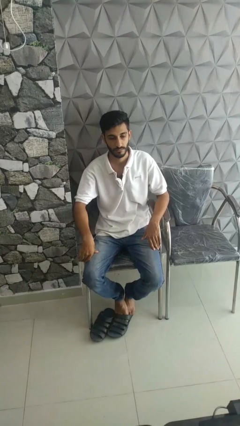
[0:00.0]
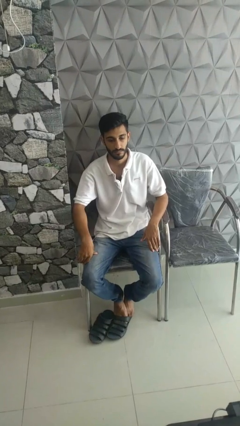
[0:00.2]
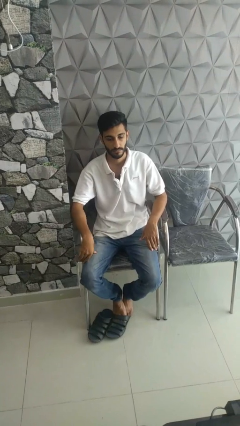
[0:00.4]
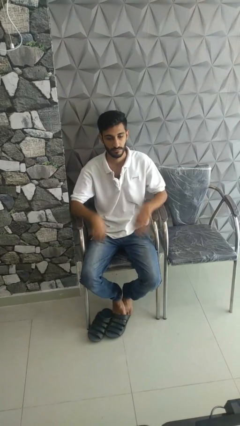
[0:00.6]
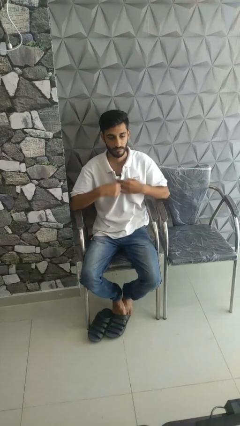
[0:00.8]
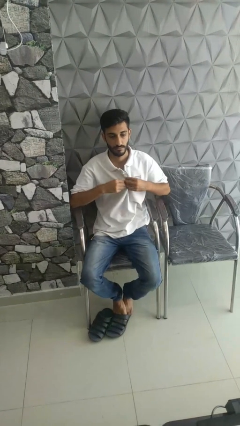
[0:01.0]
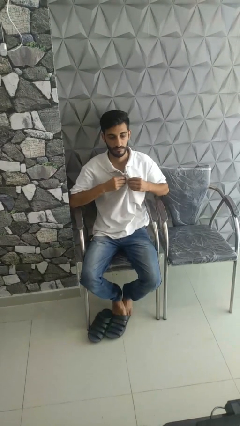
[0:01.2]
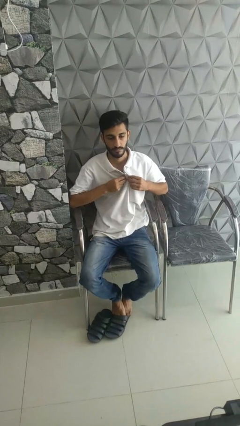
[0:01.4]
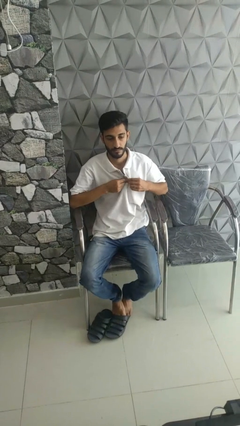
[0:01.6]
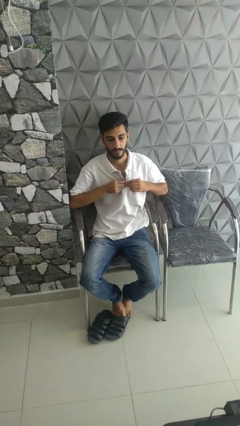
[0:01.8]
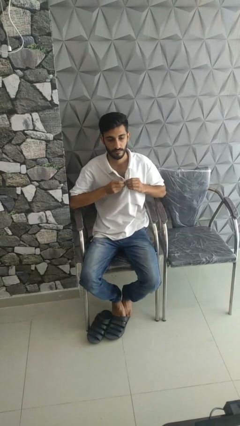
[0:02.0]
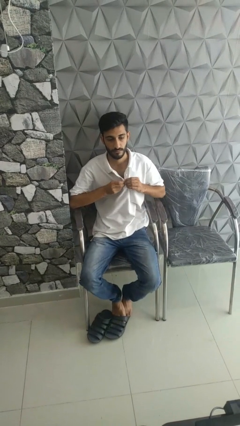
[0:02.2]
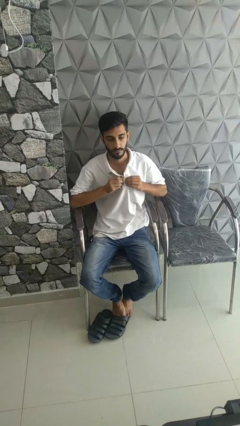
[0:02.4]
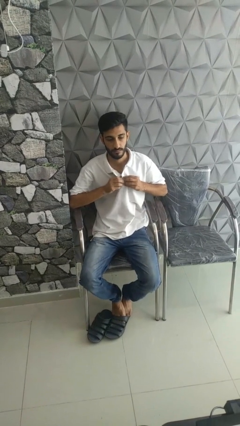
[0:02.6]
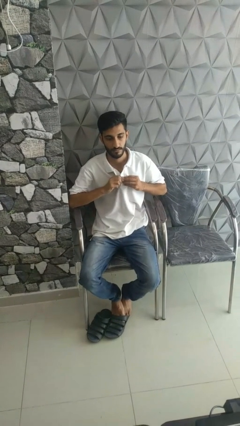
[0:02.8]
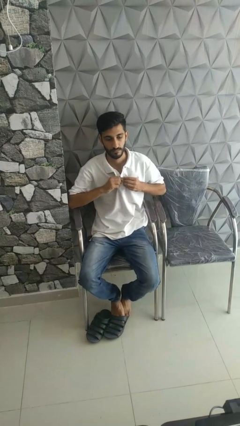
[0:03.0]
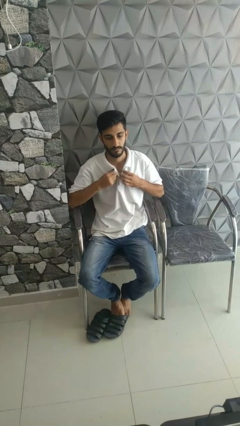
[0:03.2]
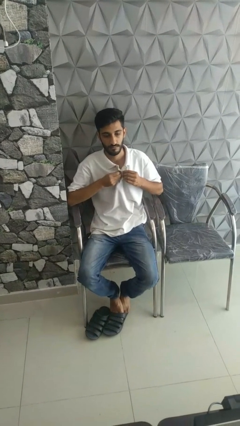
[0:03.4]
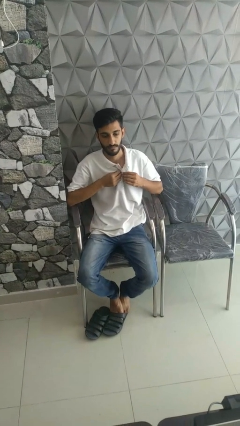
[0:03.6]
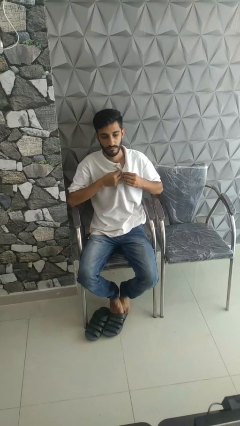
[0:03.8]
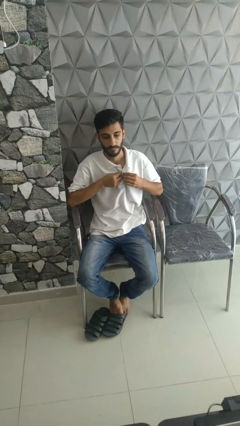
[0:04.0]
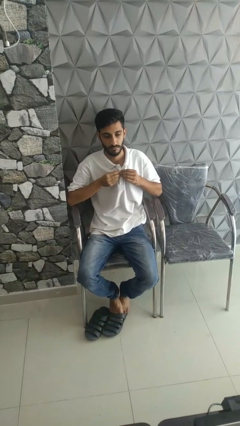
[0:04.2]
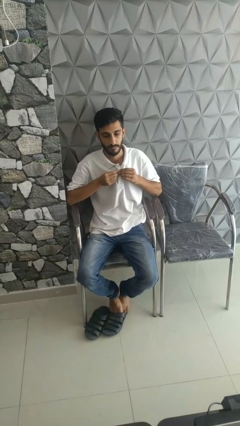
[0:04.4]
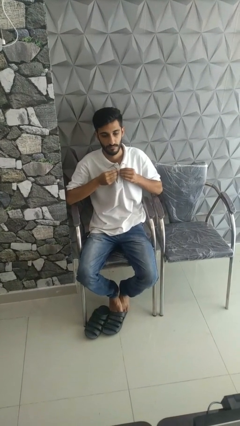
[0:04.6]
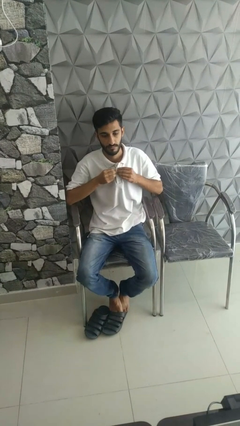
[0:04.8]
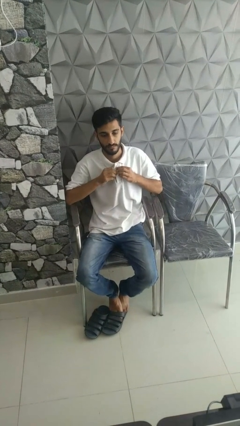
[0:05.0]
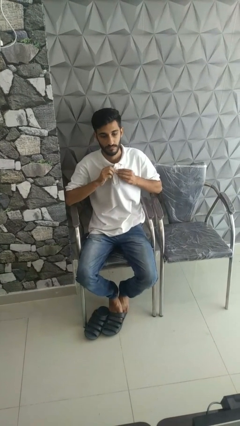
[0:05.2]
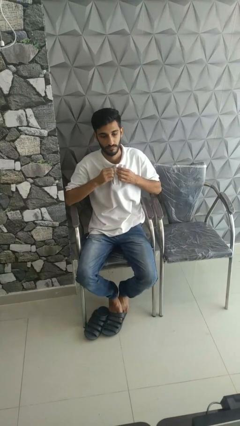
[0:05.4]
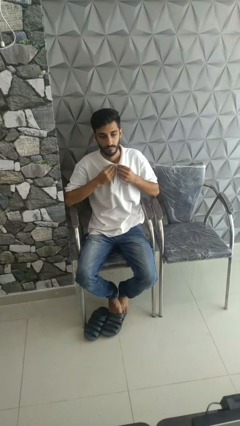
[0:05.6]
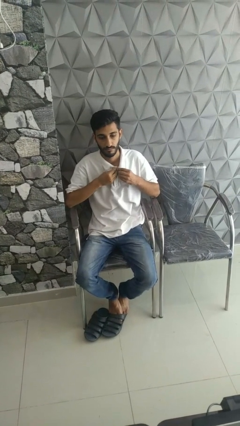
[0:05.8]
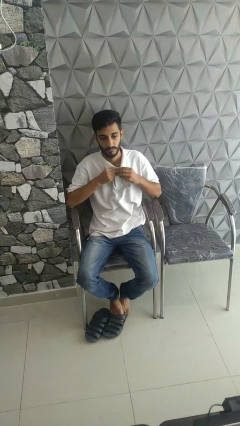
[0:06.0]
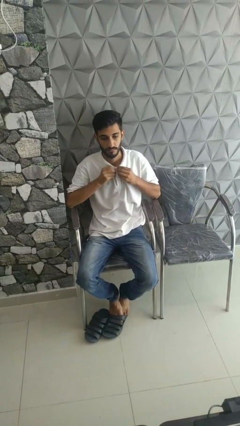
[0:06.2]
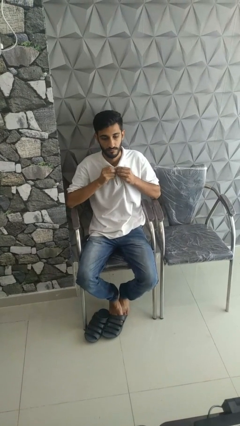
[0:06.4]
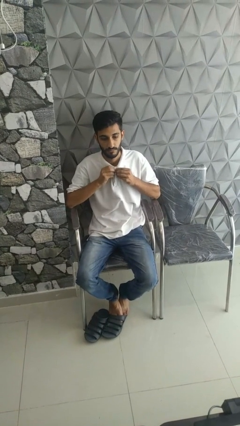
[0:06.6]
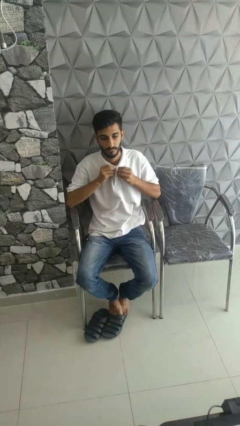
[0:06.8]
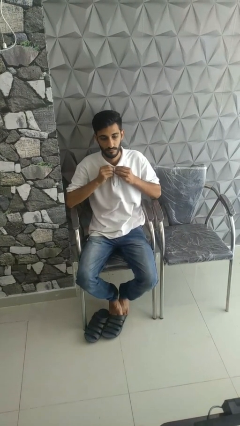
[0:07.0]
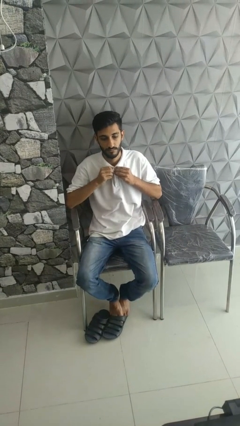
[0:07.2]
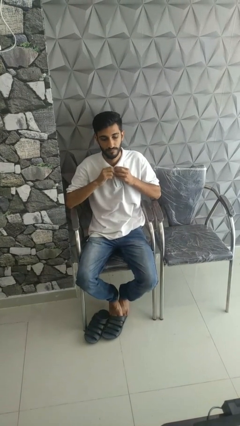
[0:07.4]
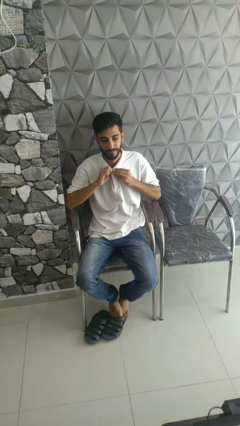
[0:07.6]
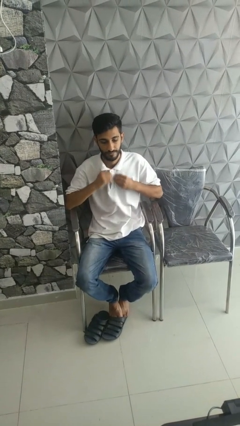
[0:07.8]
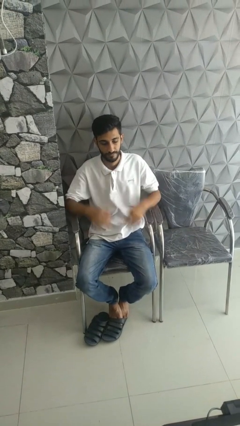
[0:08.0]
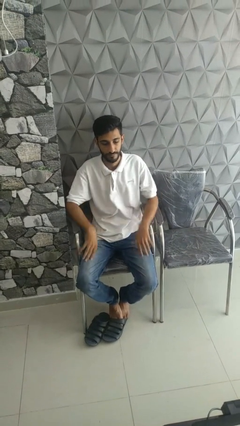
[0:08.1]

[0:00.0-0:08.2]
person buttons shirt

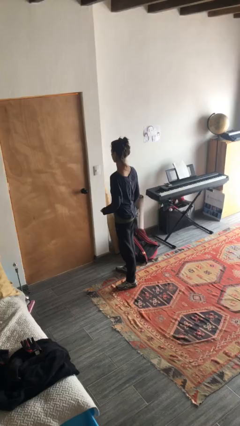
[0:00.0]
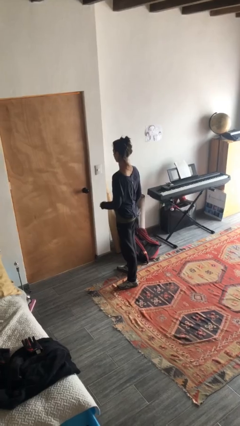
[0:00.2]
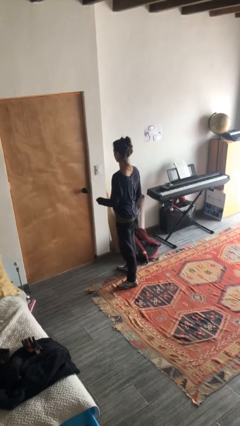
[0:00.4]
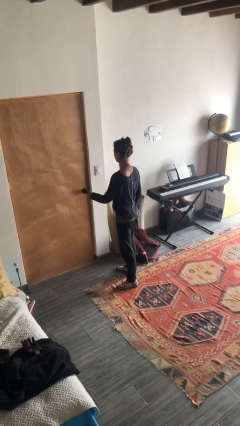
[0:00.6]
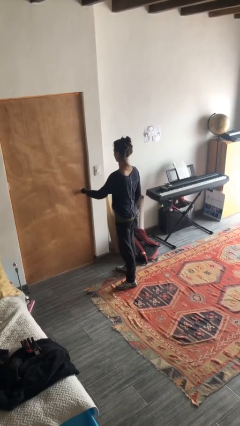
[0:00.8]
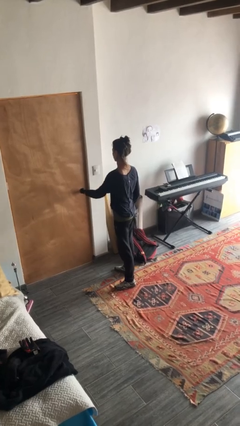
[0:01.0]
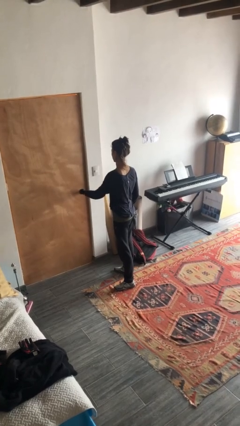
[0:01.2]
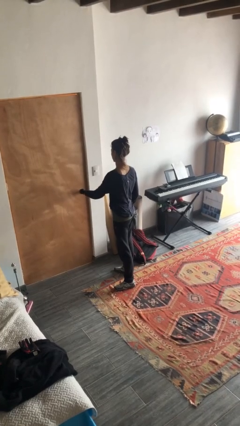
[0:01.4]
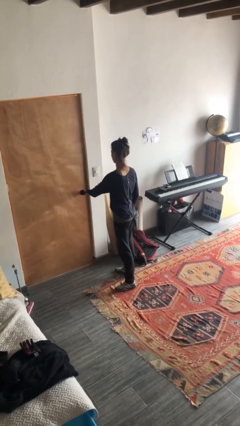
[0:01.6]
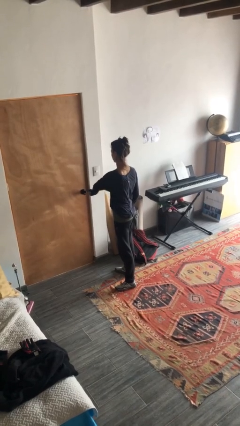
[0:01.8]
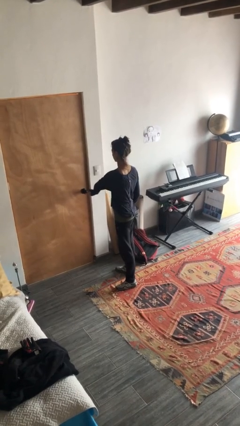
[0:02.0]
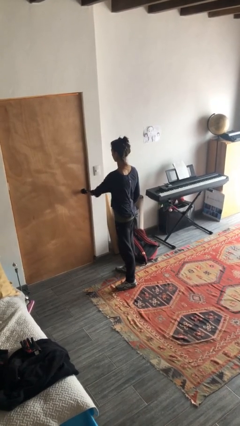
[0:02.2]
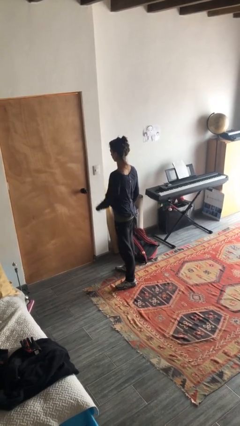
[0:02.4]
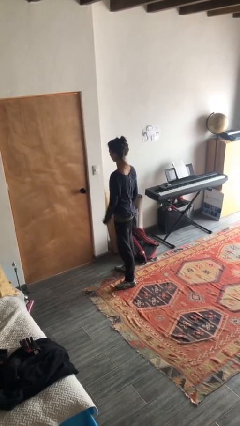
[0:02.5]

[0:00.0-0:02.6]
person locks door with keys

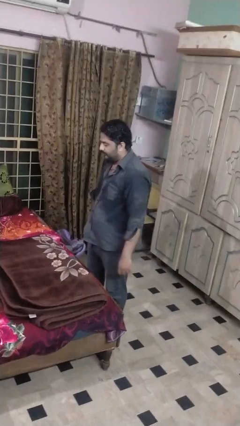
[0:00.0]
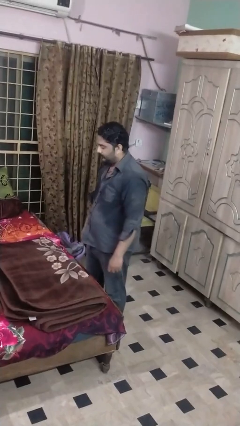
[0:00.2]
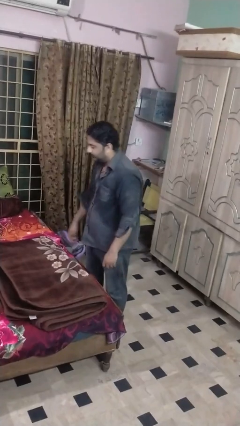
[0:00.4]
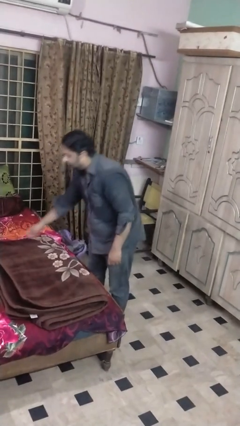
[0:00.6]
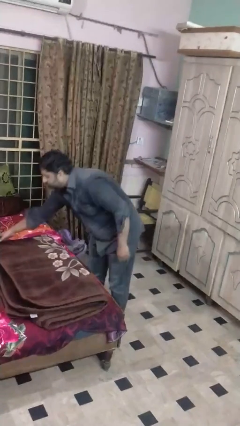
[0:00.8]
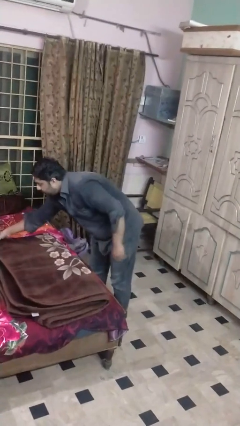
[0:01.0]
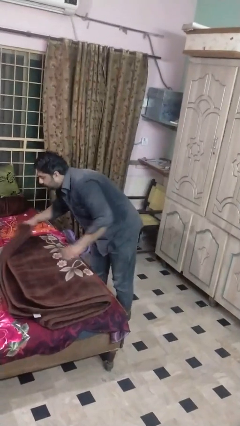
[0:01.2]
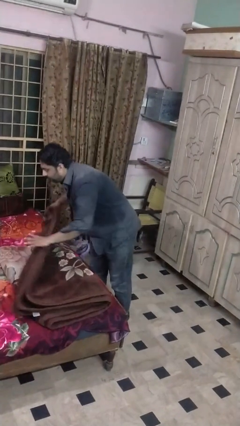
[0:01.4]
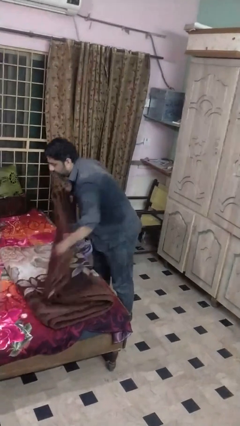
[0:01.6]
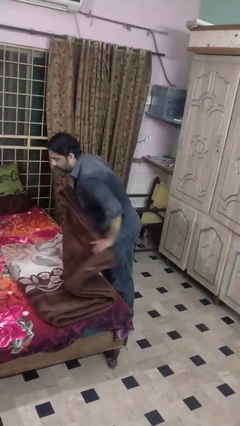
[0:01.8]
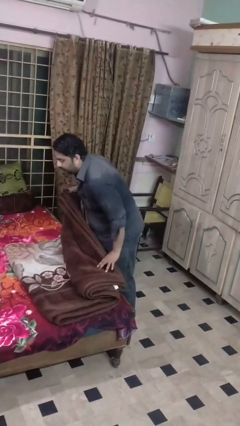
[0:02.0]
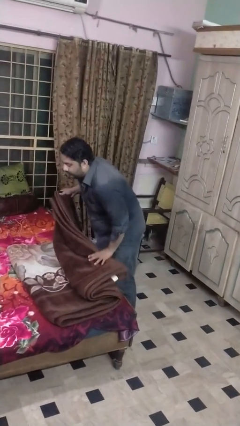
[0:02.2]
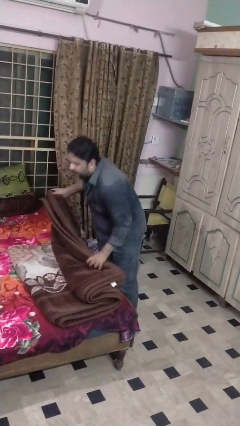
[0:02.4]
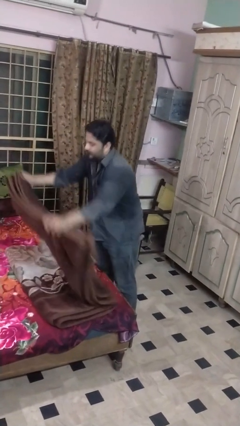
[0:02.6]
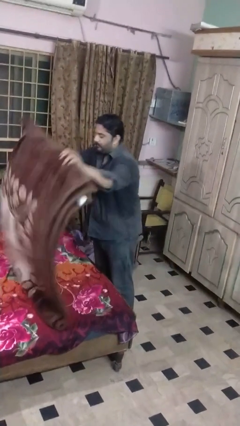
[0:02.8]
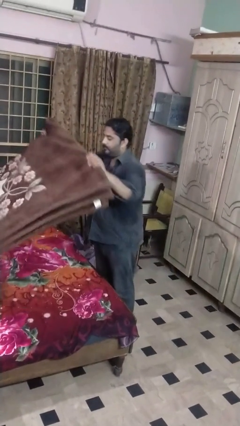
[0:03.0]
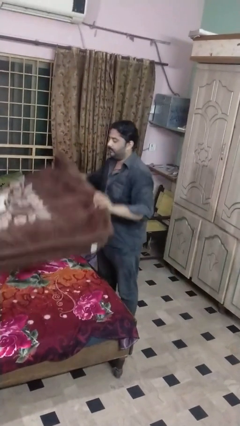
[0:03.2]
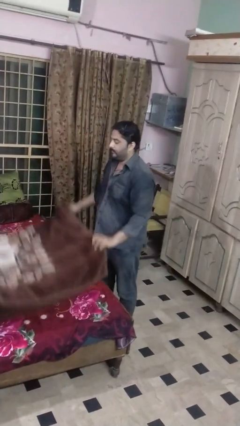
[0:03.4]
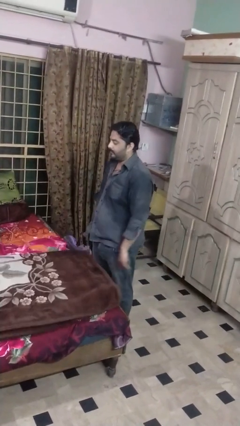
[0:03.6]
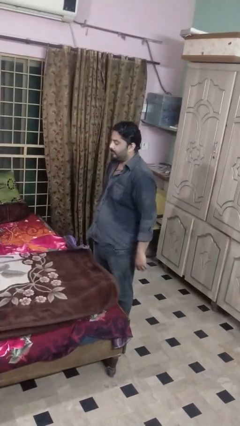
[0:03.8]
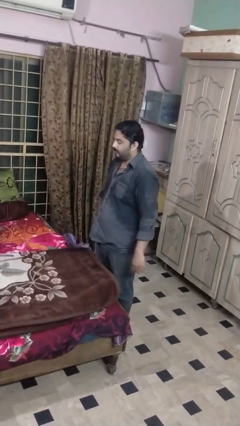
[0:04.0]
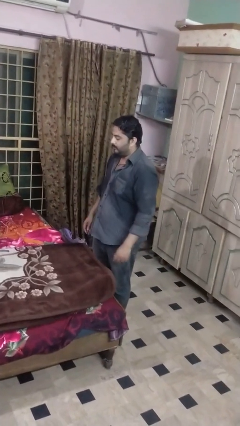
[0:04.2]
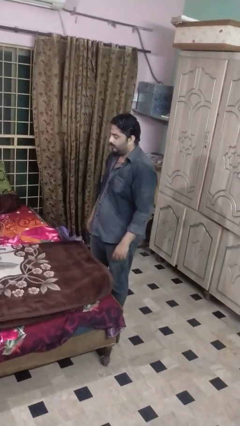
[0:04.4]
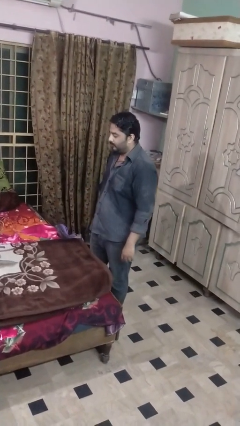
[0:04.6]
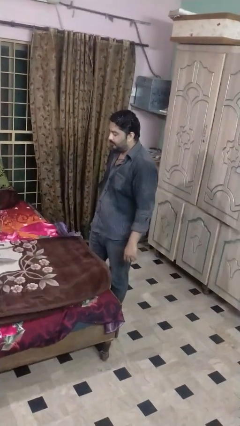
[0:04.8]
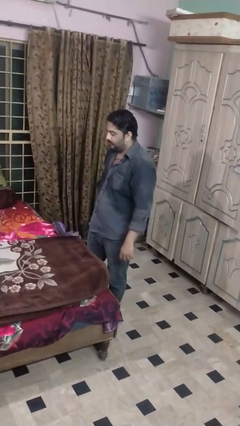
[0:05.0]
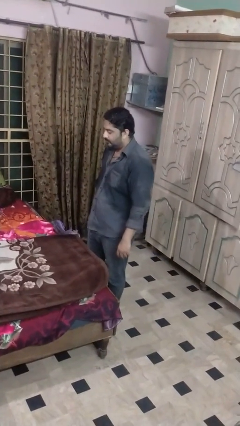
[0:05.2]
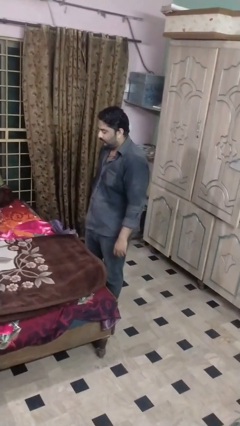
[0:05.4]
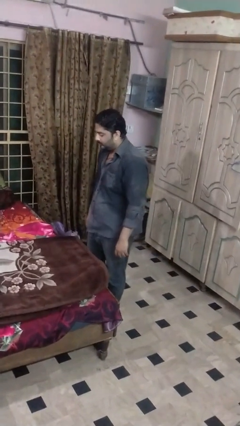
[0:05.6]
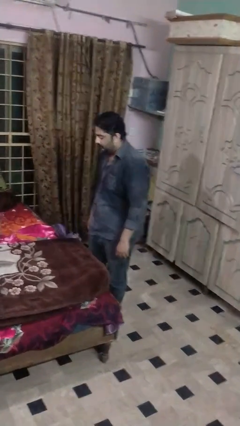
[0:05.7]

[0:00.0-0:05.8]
person unfolds blanket

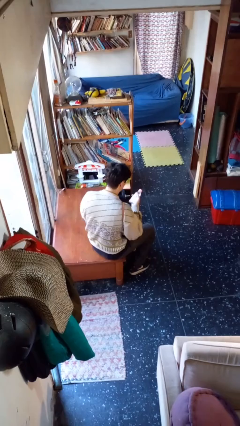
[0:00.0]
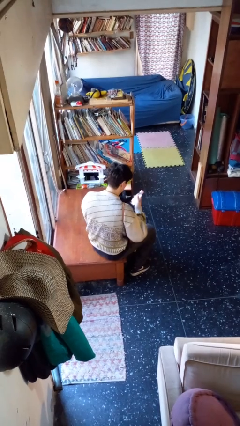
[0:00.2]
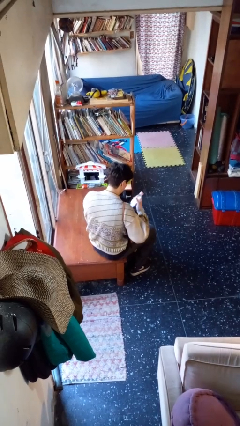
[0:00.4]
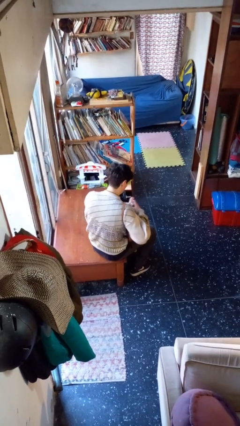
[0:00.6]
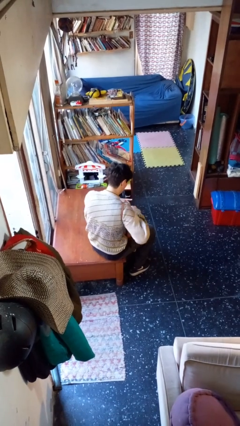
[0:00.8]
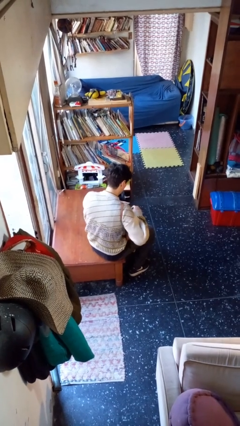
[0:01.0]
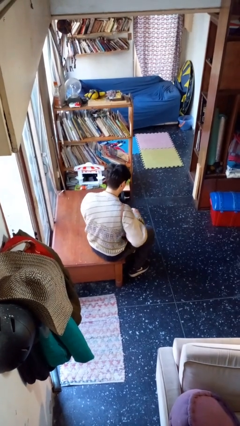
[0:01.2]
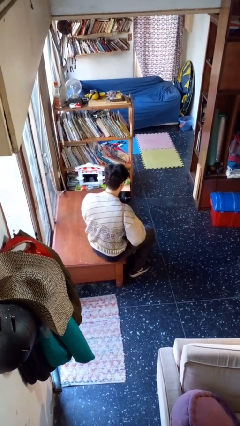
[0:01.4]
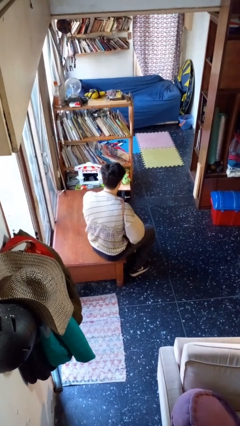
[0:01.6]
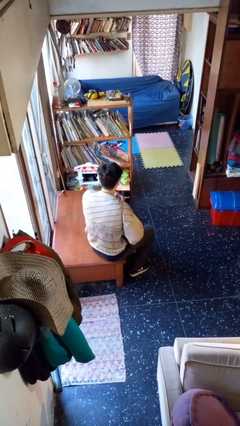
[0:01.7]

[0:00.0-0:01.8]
person puts object into purse
